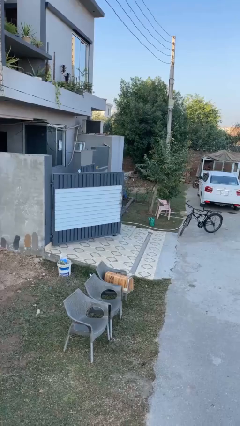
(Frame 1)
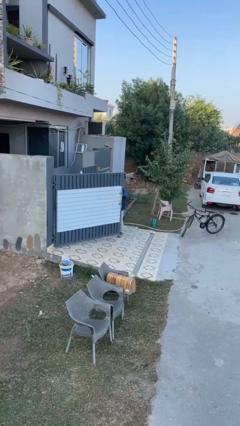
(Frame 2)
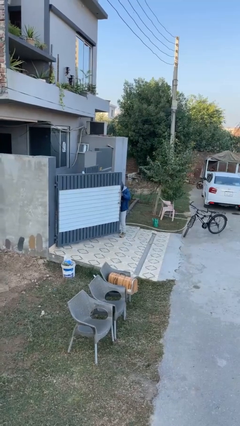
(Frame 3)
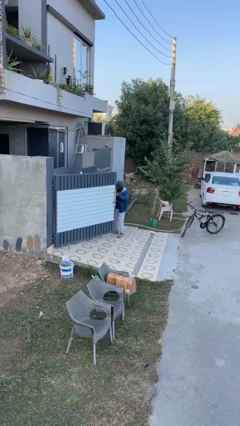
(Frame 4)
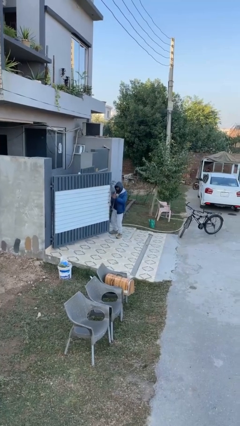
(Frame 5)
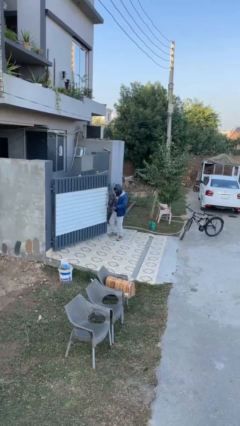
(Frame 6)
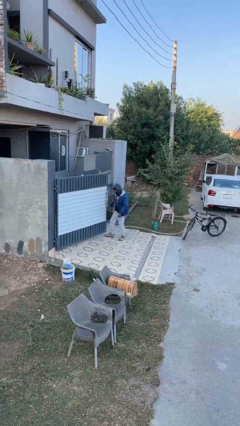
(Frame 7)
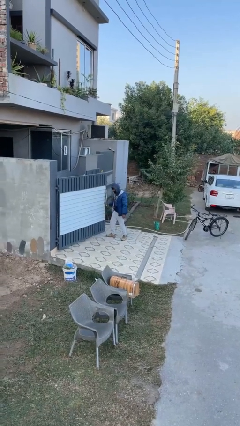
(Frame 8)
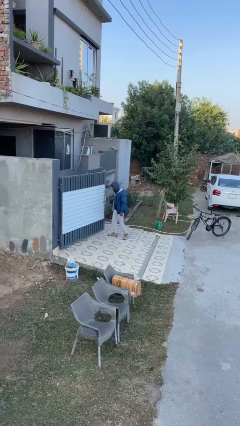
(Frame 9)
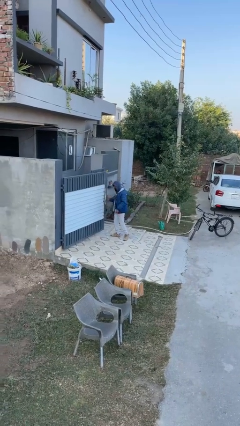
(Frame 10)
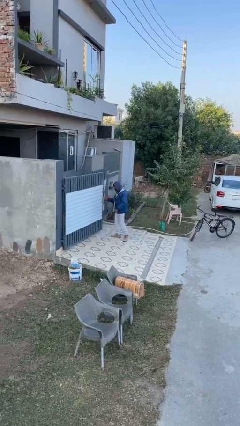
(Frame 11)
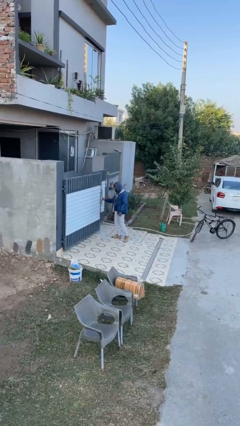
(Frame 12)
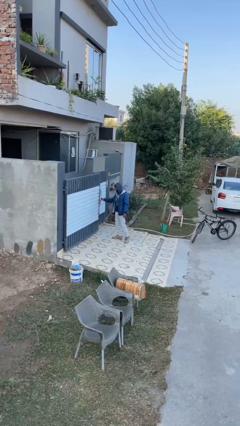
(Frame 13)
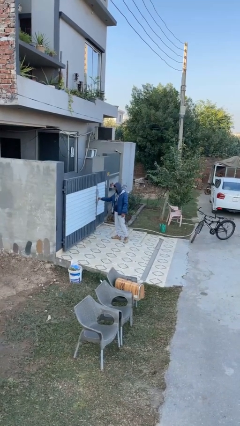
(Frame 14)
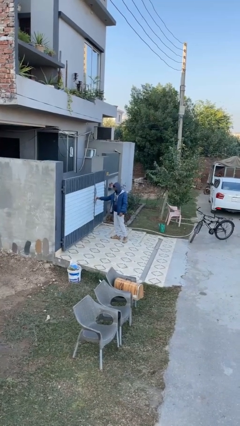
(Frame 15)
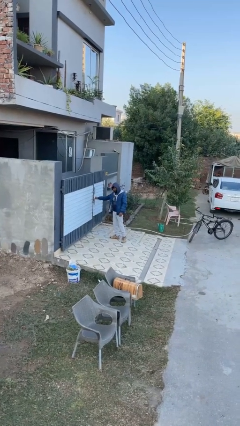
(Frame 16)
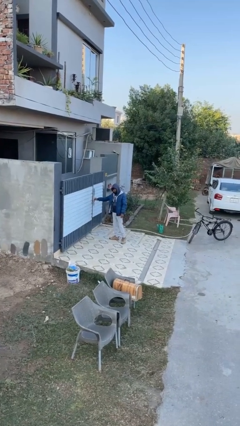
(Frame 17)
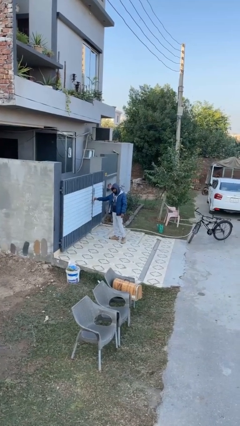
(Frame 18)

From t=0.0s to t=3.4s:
person closes facility door

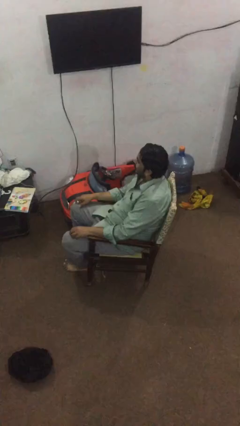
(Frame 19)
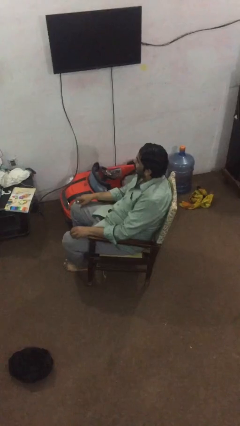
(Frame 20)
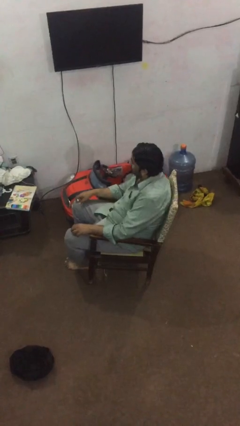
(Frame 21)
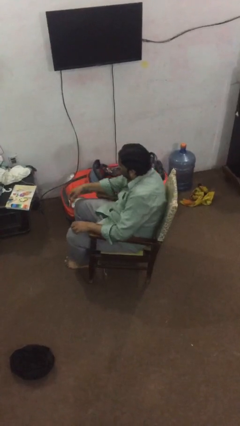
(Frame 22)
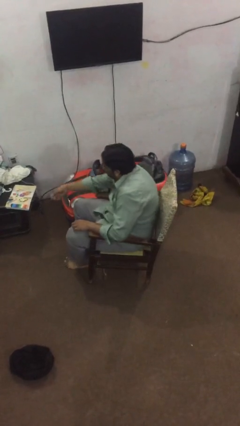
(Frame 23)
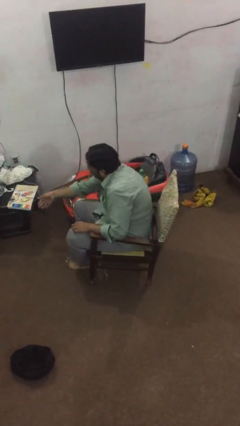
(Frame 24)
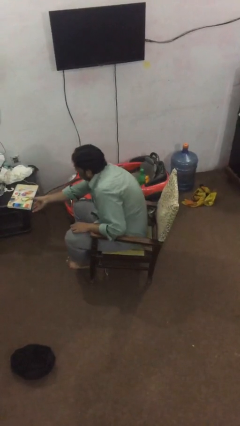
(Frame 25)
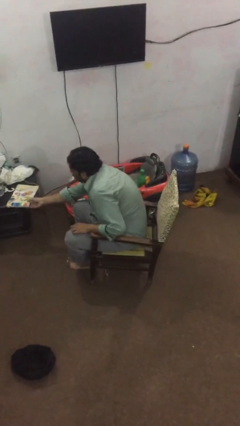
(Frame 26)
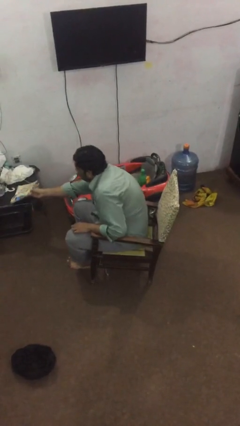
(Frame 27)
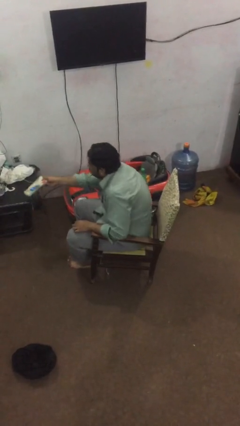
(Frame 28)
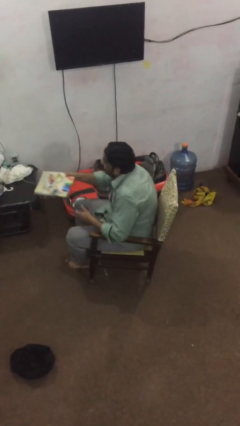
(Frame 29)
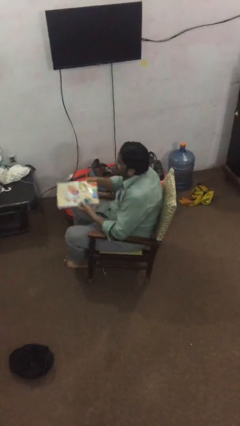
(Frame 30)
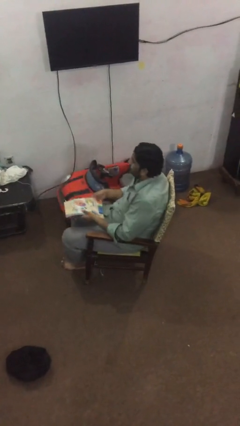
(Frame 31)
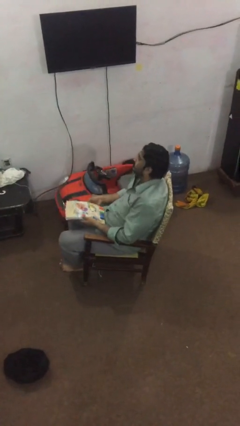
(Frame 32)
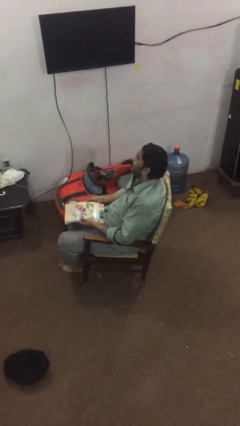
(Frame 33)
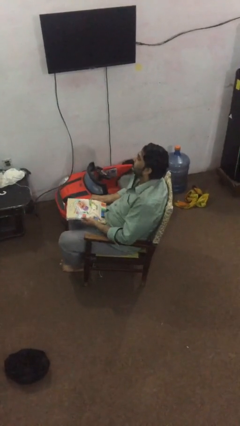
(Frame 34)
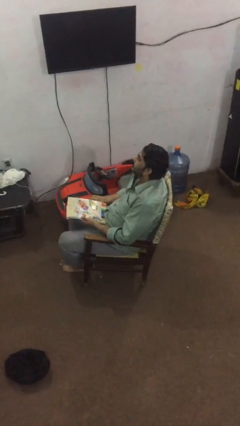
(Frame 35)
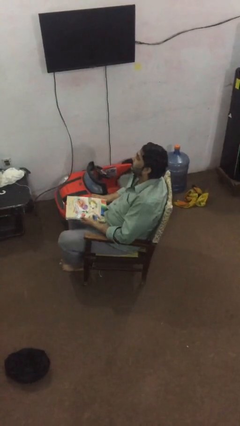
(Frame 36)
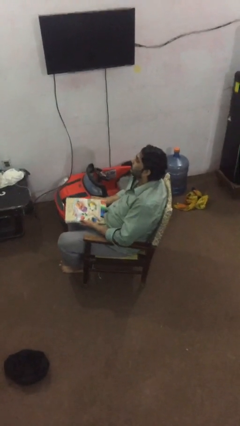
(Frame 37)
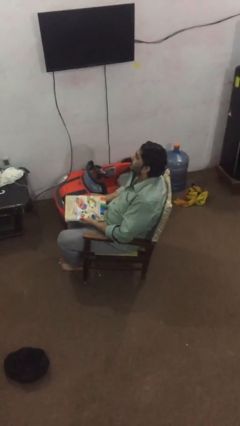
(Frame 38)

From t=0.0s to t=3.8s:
person picks up object from table

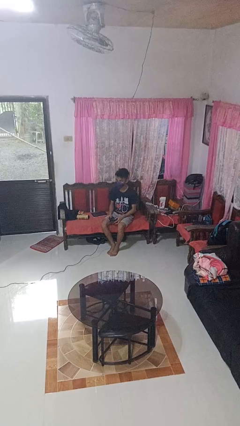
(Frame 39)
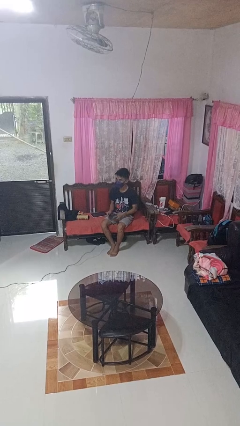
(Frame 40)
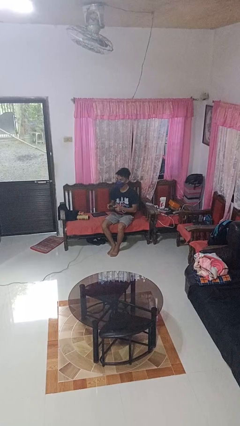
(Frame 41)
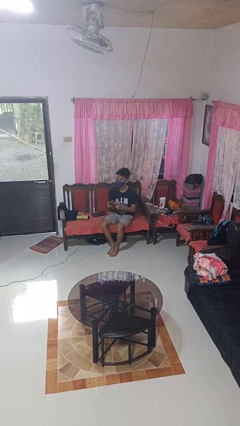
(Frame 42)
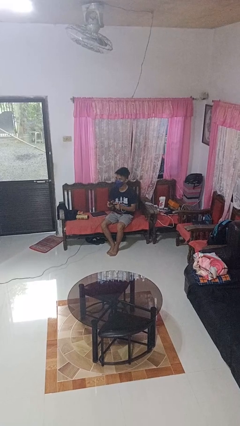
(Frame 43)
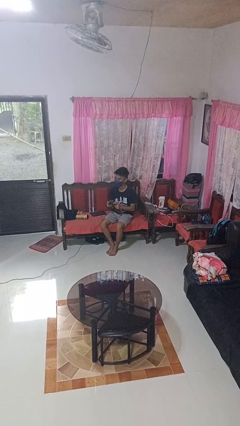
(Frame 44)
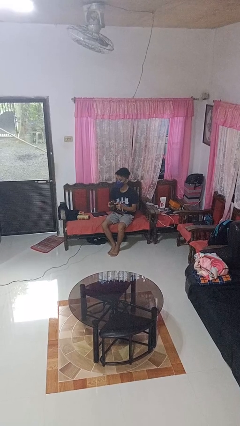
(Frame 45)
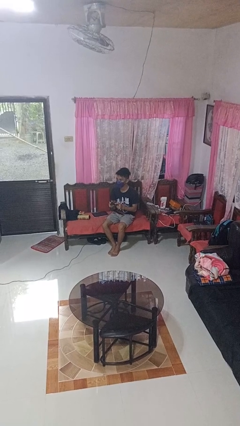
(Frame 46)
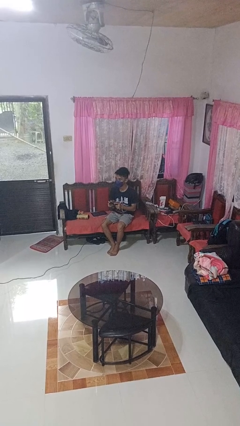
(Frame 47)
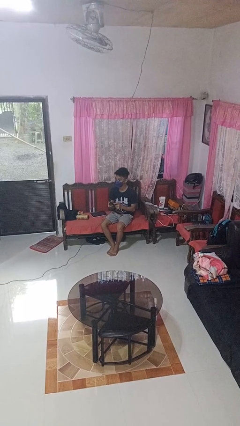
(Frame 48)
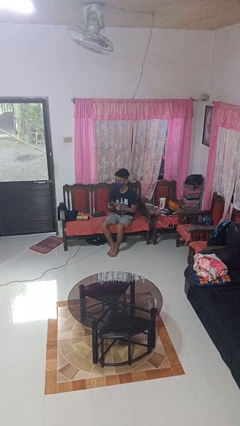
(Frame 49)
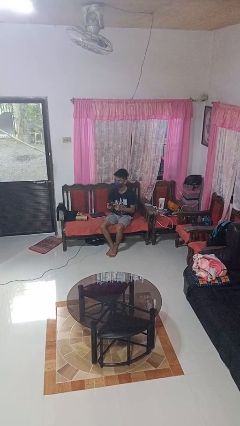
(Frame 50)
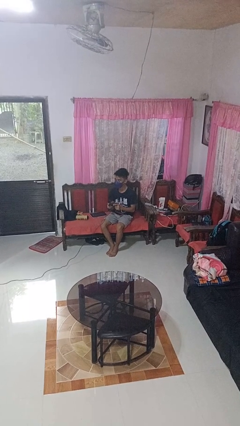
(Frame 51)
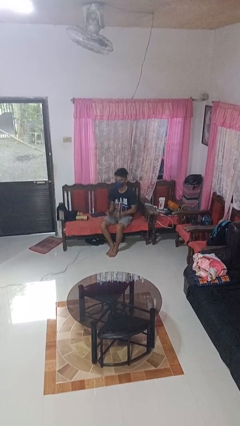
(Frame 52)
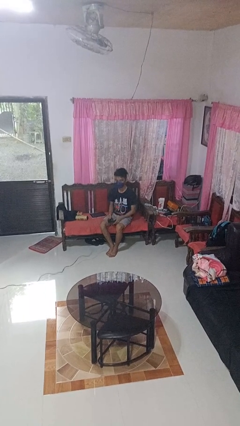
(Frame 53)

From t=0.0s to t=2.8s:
person interacts with handheld game

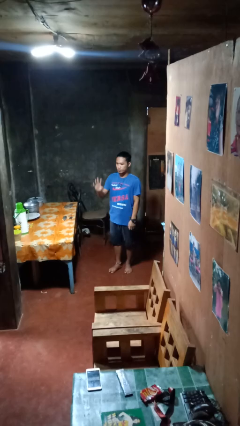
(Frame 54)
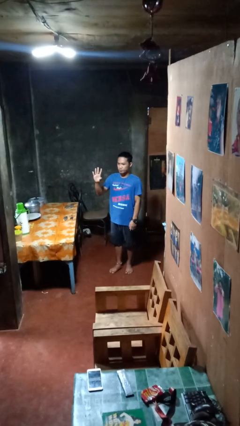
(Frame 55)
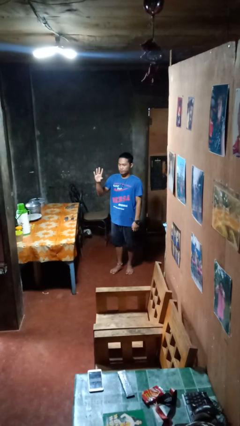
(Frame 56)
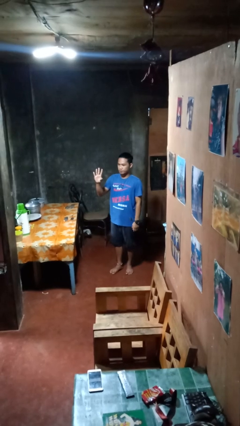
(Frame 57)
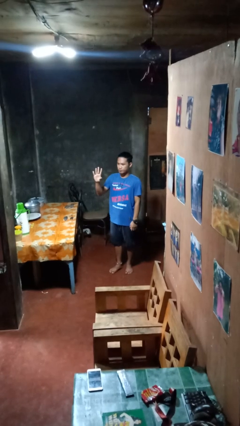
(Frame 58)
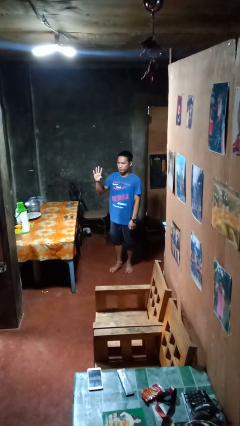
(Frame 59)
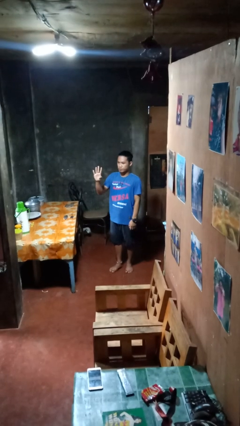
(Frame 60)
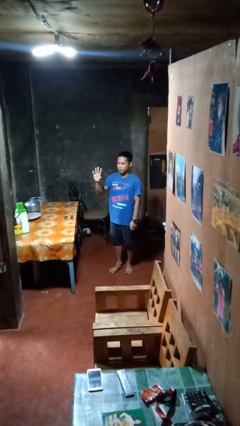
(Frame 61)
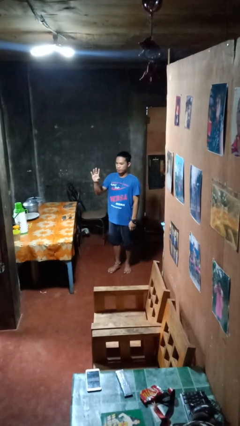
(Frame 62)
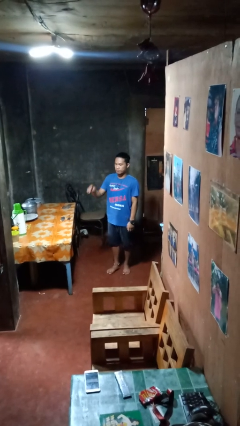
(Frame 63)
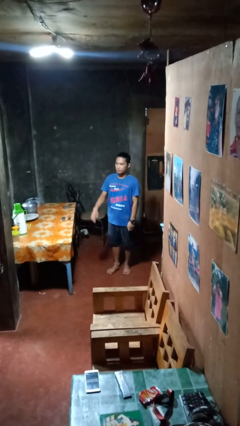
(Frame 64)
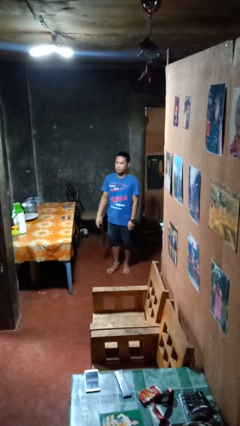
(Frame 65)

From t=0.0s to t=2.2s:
person gestures number four

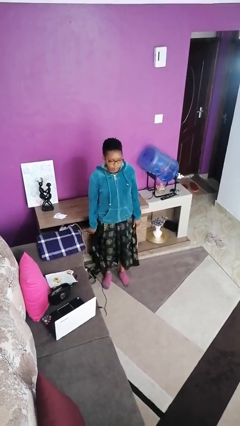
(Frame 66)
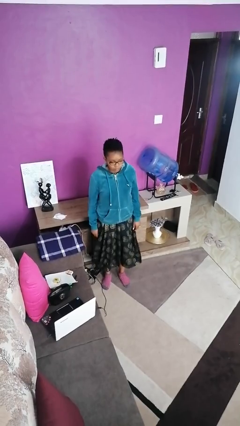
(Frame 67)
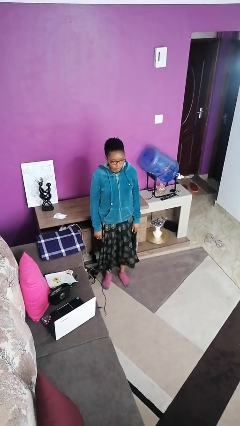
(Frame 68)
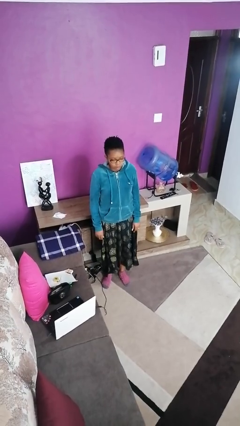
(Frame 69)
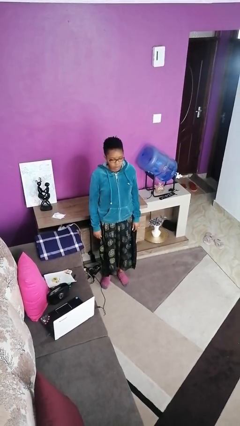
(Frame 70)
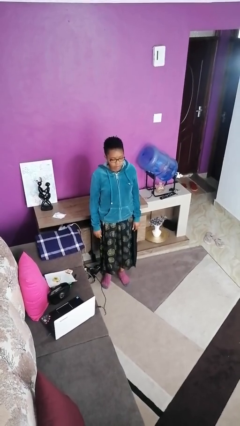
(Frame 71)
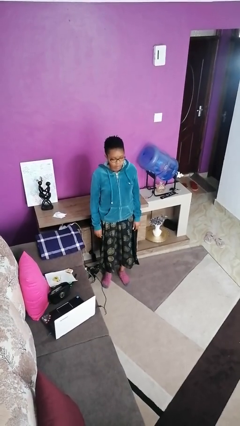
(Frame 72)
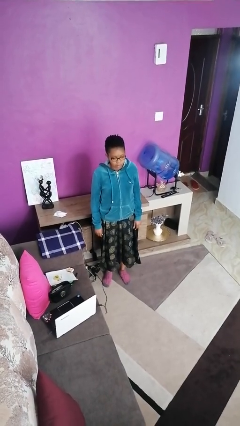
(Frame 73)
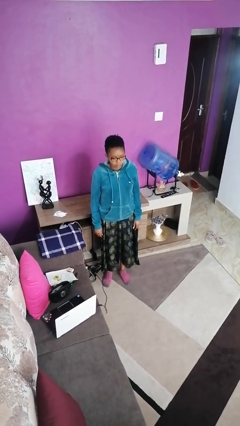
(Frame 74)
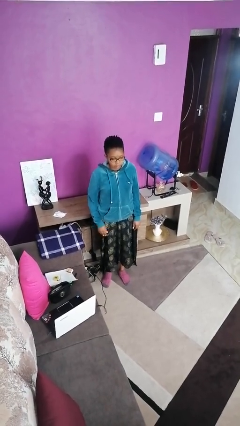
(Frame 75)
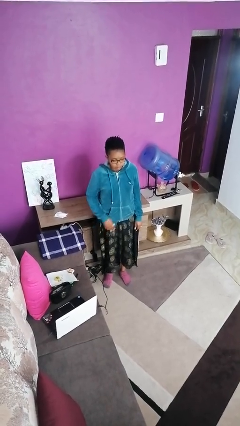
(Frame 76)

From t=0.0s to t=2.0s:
person opens cabinet

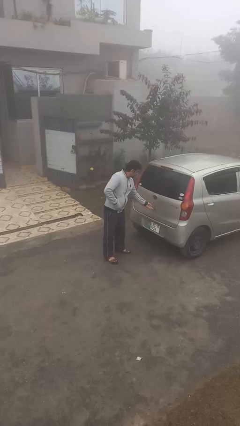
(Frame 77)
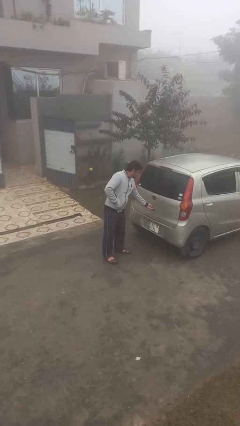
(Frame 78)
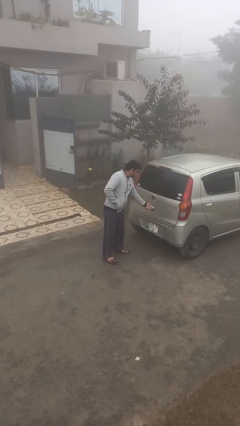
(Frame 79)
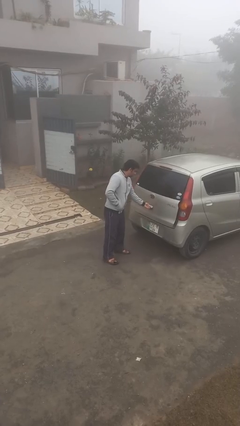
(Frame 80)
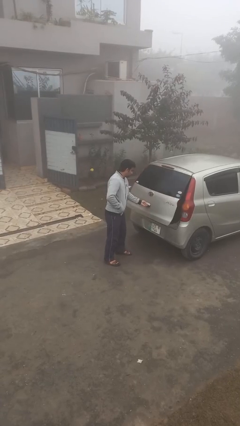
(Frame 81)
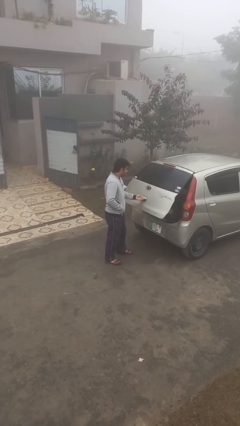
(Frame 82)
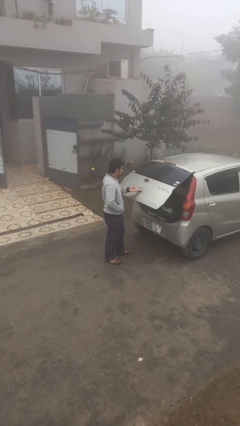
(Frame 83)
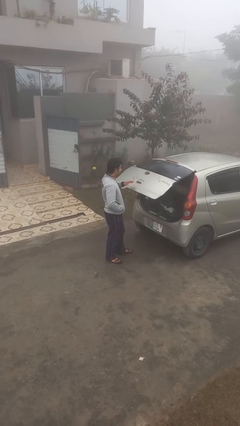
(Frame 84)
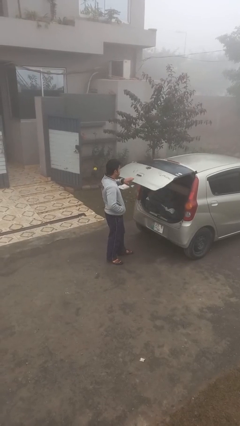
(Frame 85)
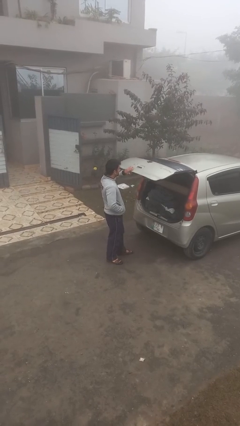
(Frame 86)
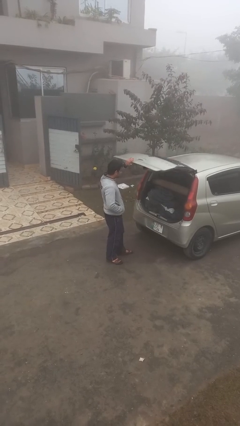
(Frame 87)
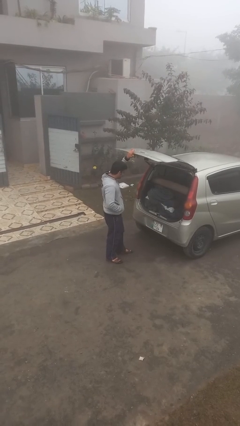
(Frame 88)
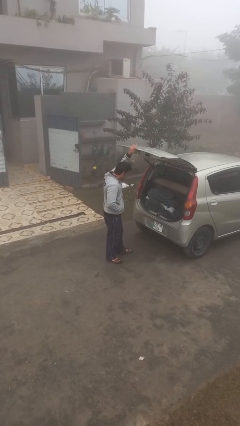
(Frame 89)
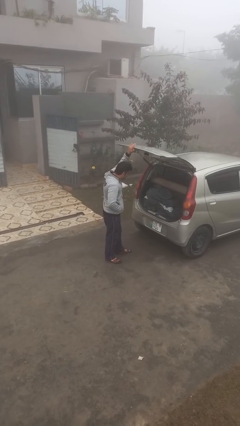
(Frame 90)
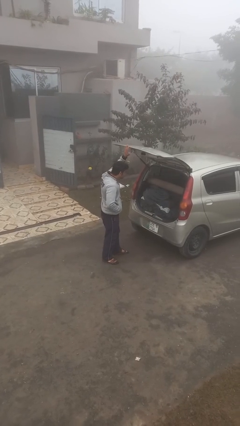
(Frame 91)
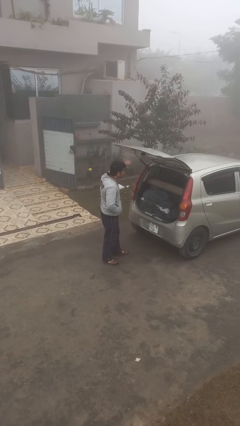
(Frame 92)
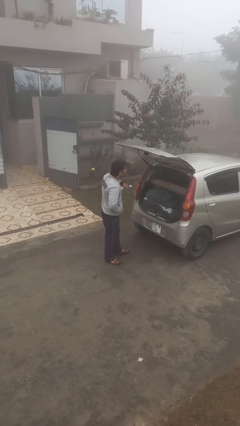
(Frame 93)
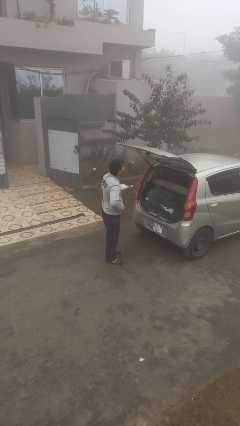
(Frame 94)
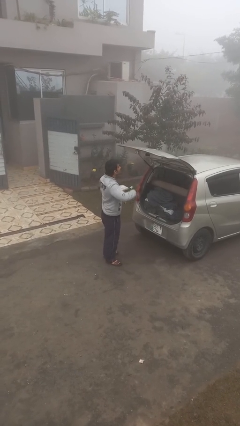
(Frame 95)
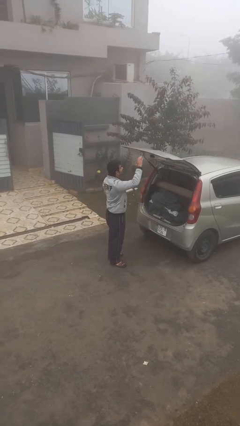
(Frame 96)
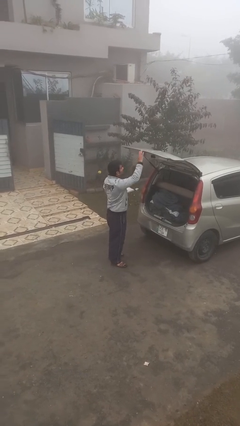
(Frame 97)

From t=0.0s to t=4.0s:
person opens car trunk
